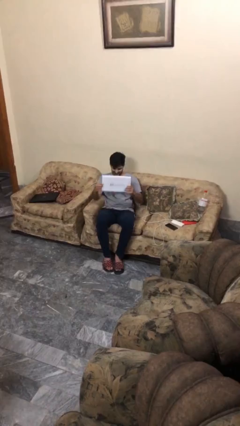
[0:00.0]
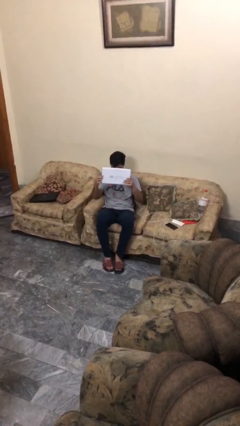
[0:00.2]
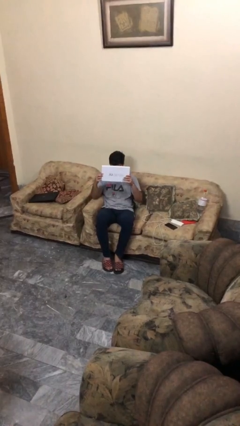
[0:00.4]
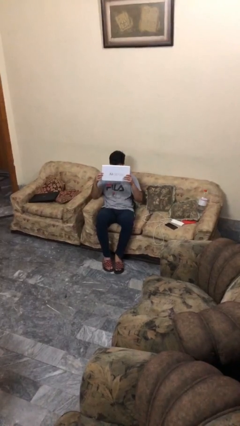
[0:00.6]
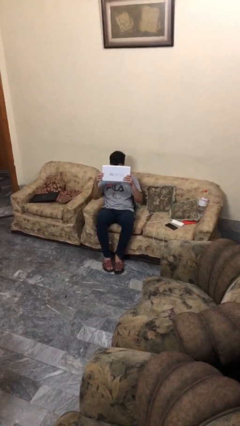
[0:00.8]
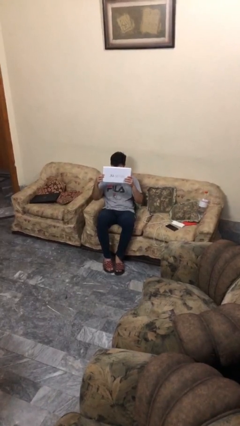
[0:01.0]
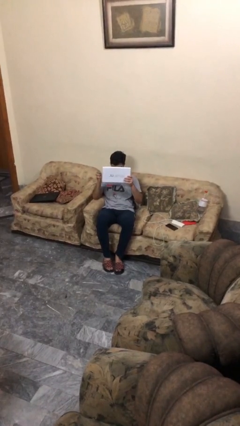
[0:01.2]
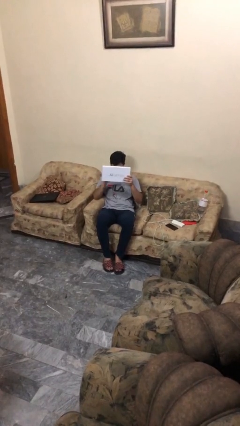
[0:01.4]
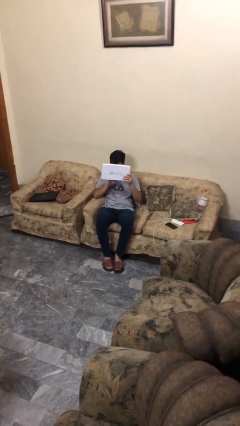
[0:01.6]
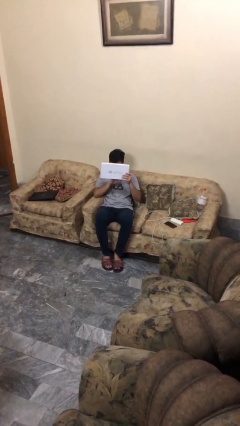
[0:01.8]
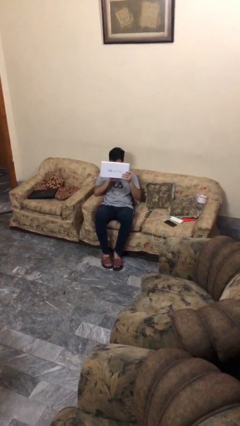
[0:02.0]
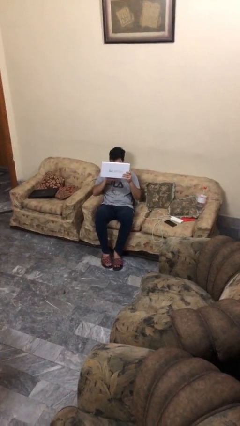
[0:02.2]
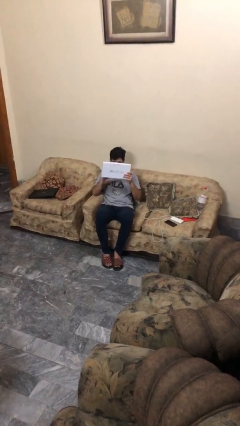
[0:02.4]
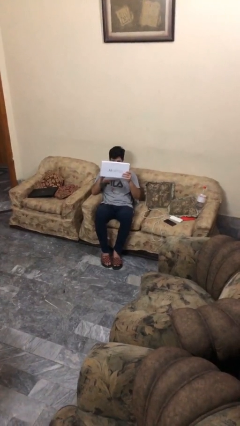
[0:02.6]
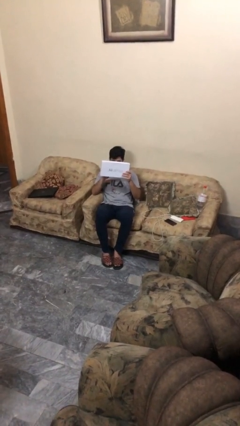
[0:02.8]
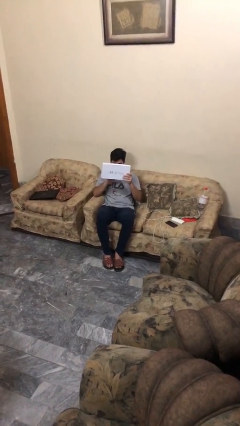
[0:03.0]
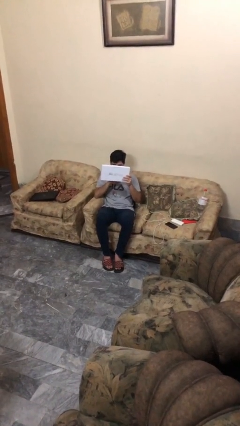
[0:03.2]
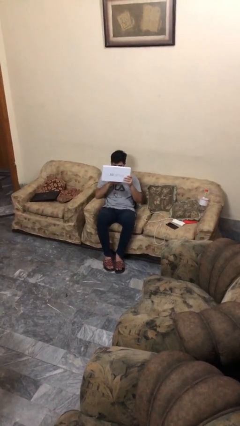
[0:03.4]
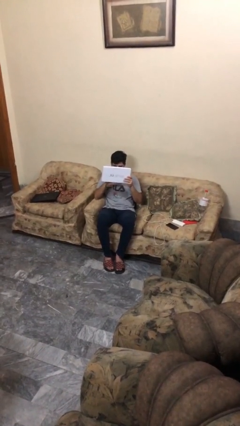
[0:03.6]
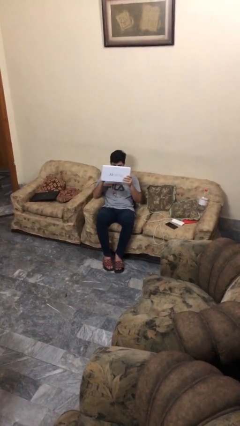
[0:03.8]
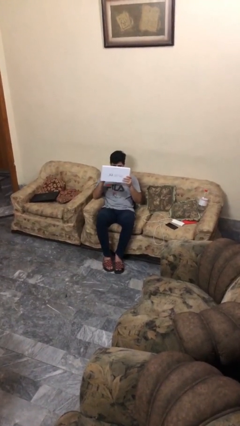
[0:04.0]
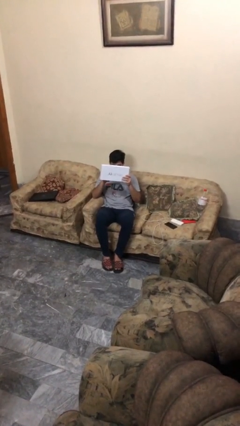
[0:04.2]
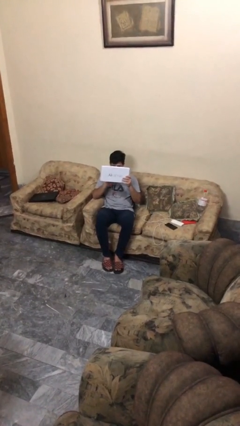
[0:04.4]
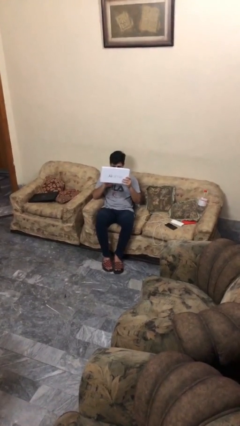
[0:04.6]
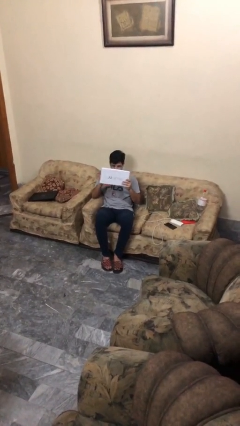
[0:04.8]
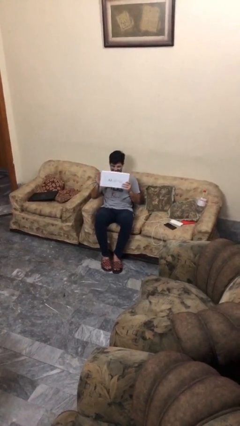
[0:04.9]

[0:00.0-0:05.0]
person interacts with tablet

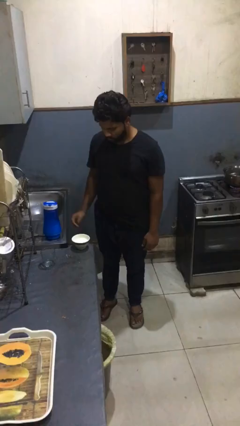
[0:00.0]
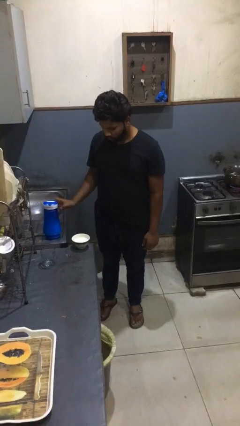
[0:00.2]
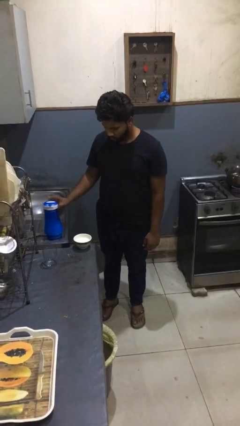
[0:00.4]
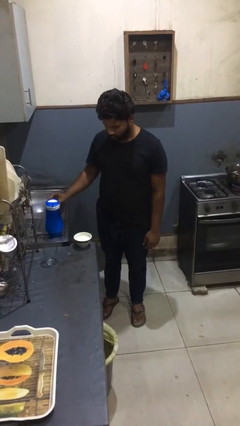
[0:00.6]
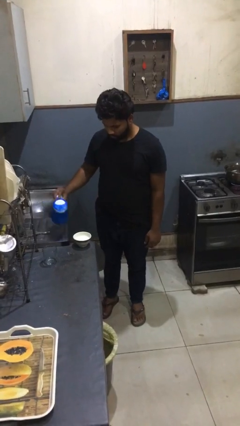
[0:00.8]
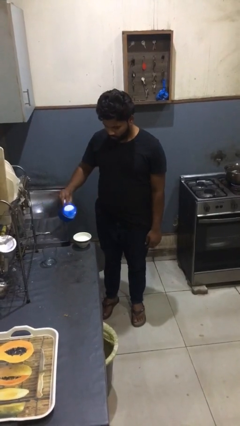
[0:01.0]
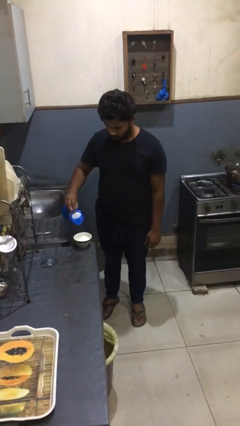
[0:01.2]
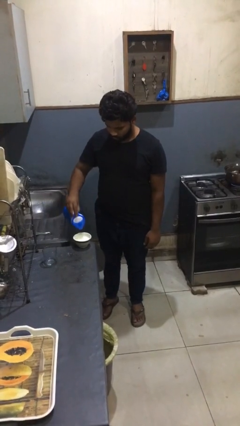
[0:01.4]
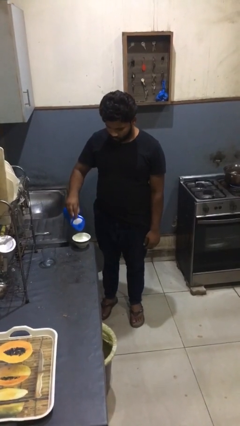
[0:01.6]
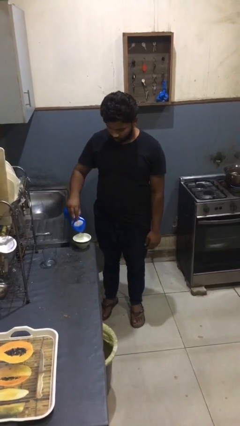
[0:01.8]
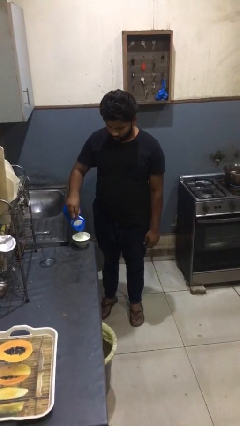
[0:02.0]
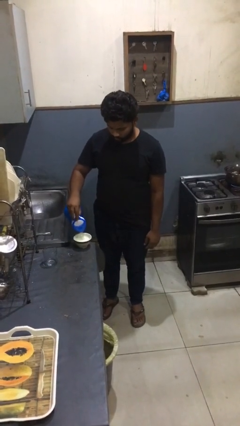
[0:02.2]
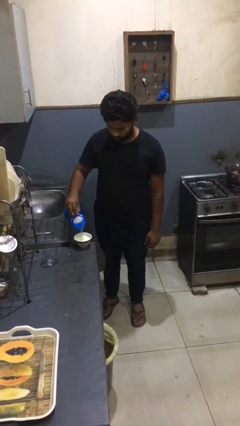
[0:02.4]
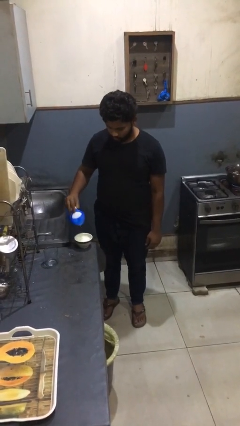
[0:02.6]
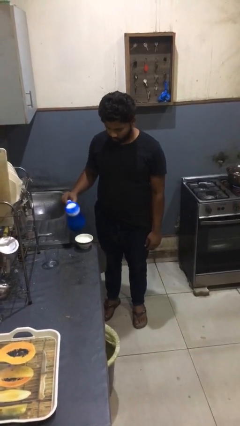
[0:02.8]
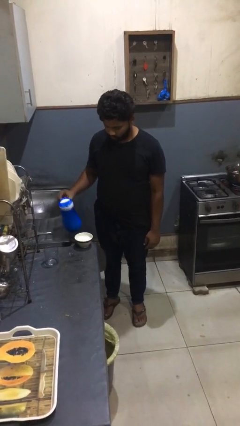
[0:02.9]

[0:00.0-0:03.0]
person pours into bowl

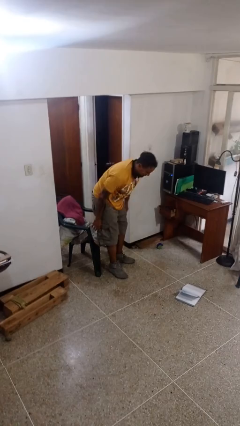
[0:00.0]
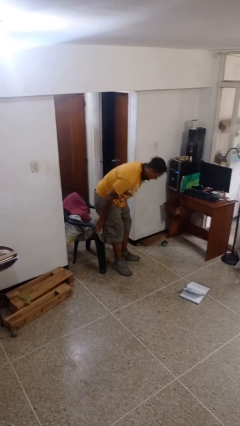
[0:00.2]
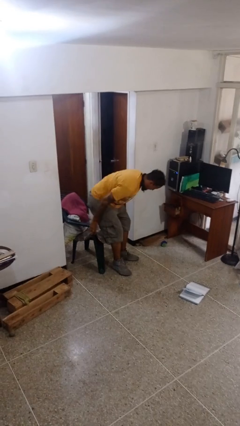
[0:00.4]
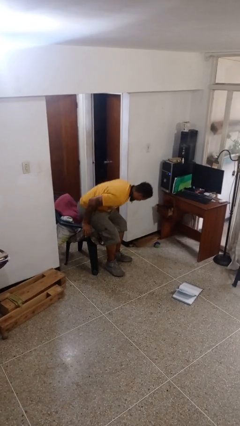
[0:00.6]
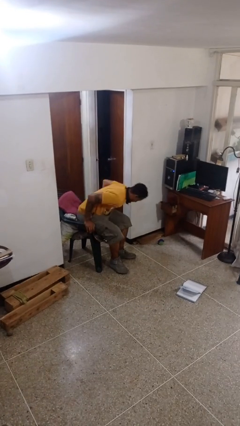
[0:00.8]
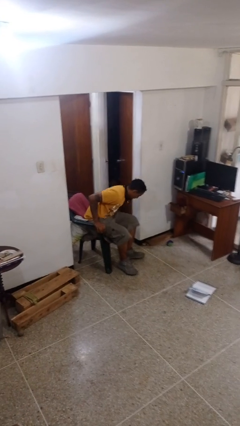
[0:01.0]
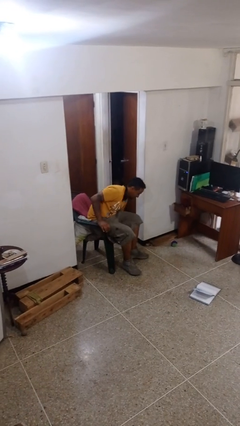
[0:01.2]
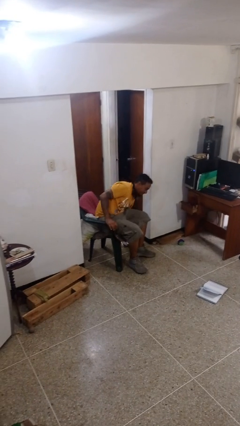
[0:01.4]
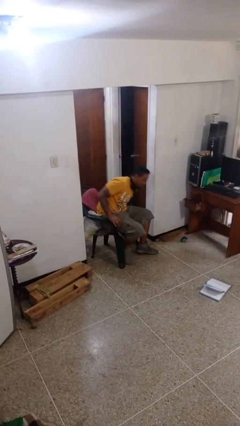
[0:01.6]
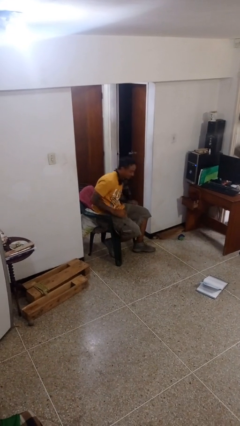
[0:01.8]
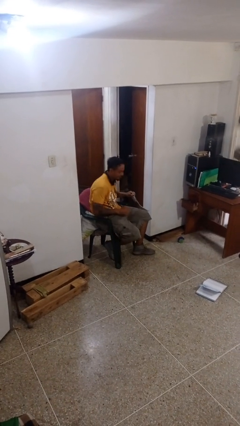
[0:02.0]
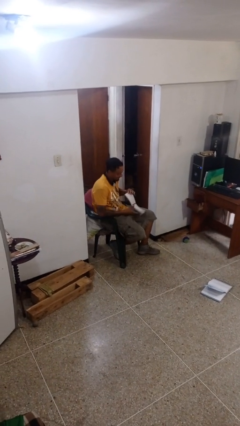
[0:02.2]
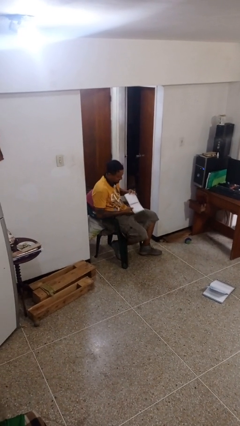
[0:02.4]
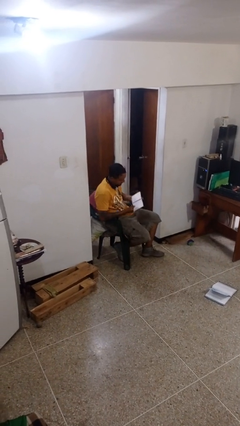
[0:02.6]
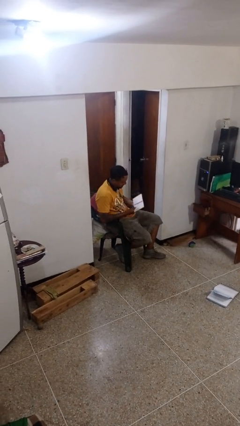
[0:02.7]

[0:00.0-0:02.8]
person sits down

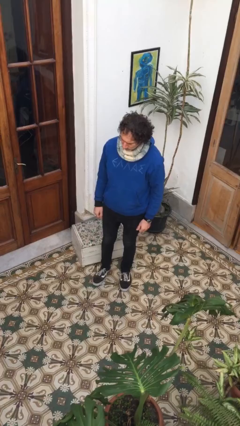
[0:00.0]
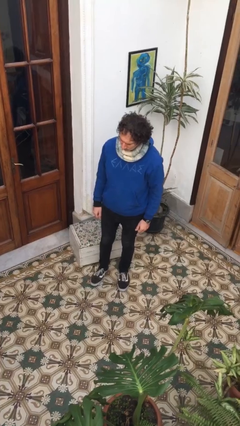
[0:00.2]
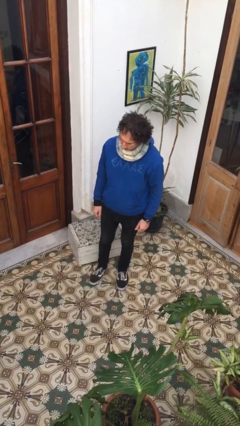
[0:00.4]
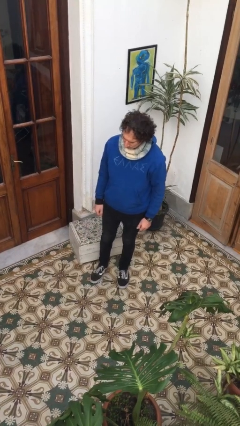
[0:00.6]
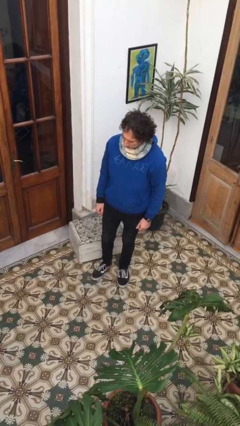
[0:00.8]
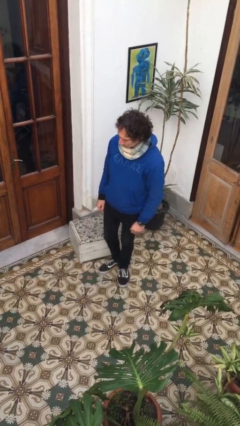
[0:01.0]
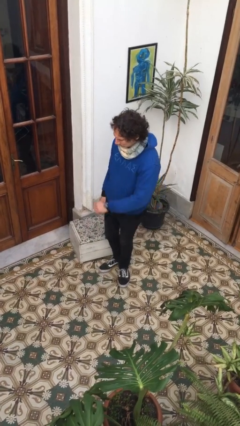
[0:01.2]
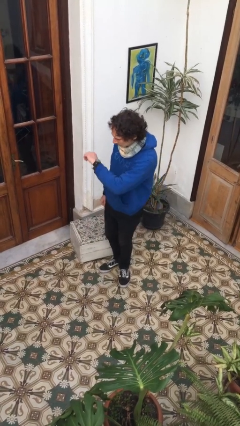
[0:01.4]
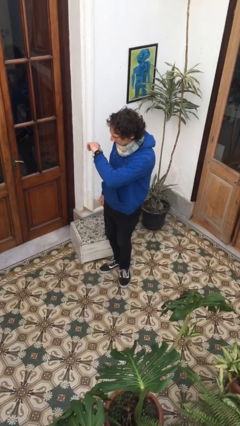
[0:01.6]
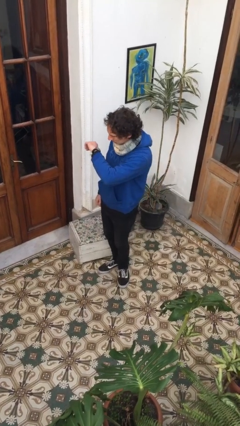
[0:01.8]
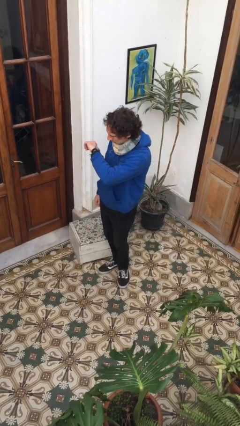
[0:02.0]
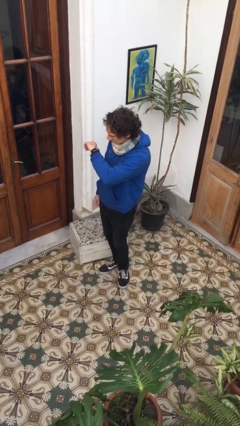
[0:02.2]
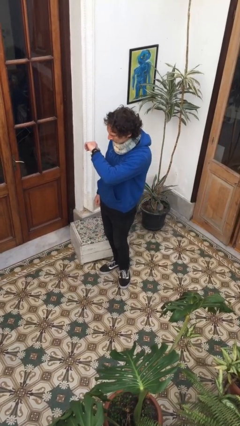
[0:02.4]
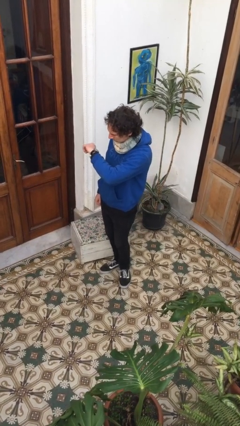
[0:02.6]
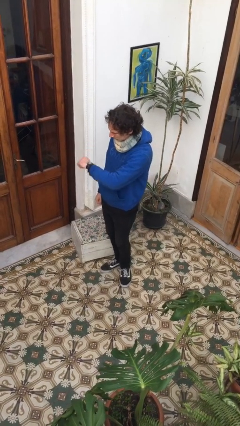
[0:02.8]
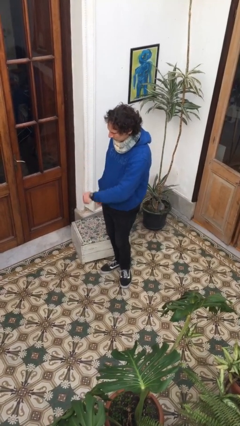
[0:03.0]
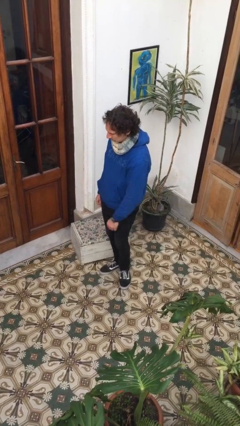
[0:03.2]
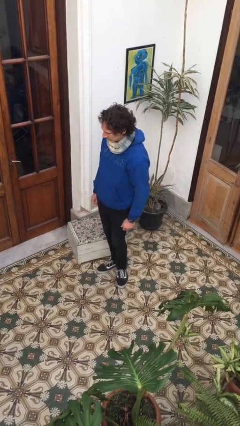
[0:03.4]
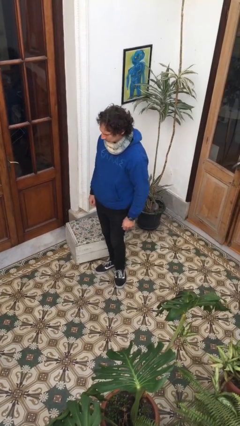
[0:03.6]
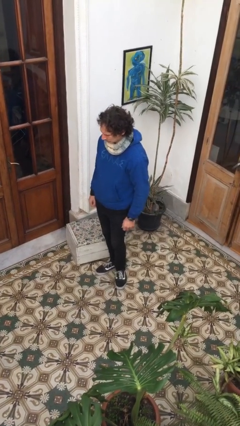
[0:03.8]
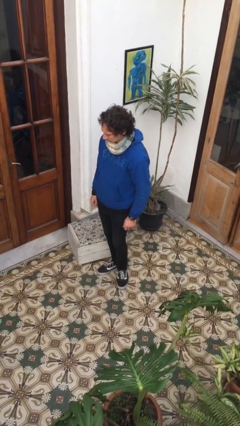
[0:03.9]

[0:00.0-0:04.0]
person looks at wristwatch

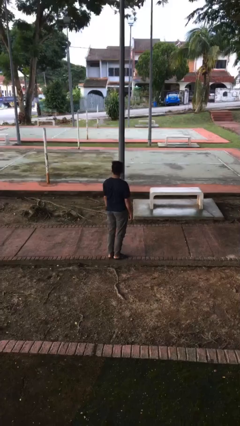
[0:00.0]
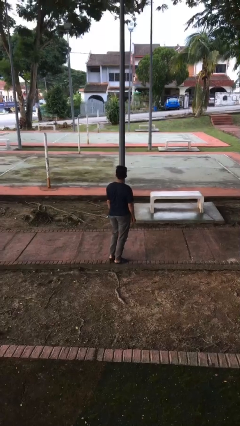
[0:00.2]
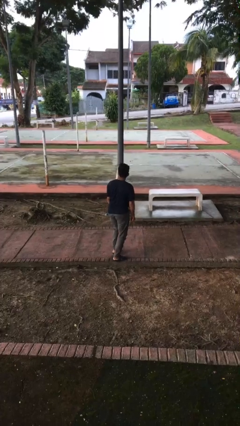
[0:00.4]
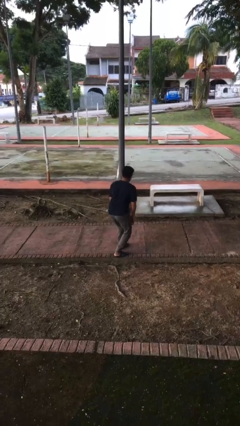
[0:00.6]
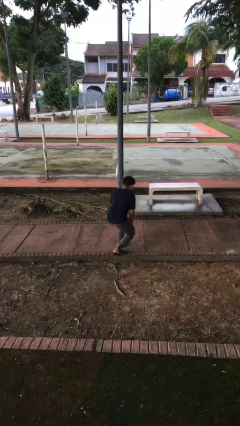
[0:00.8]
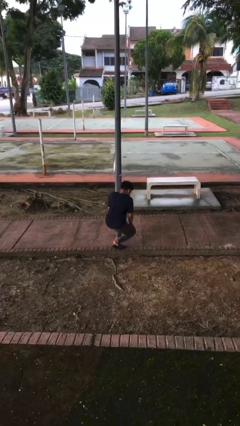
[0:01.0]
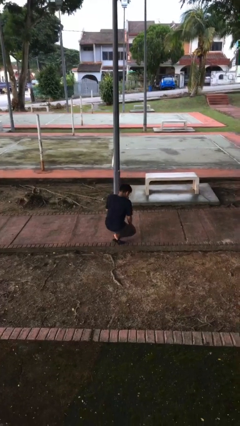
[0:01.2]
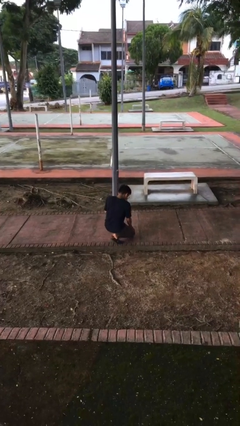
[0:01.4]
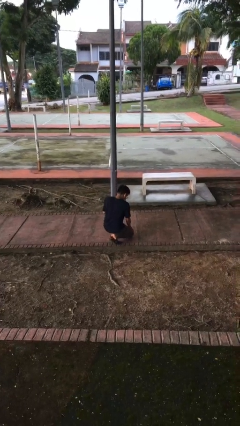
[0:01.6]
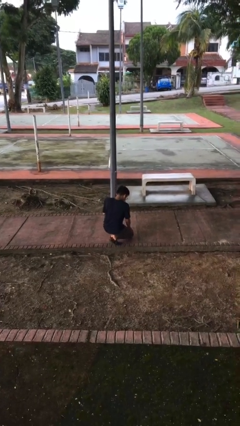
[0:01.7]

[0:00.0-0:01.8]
person kneels

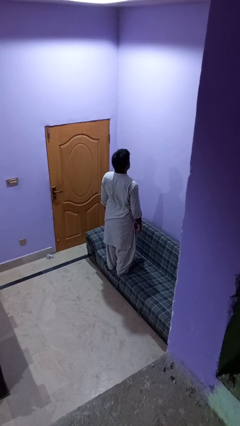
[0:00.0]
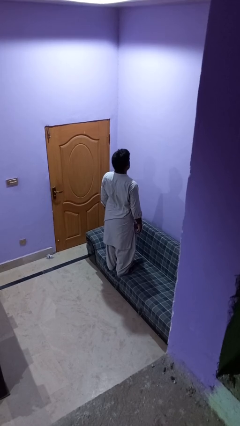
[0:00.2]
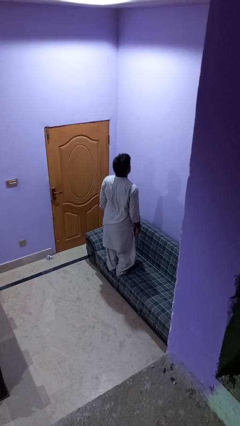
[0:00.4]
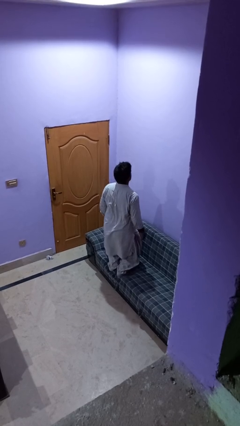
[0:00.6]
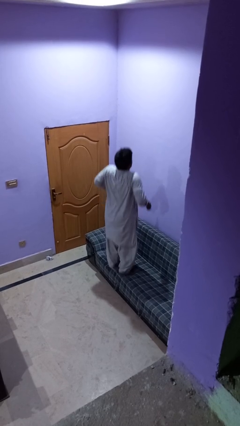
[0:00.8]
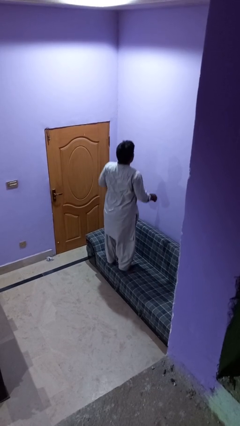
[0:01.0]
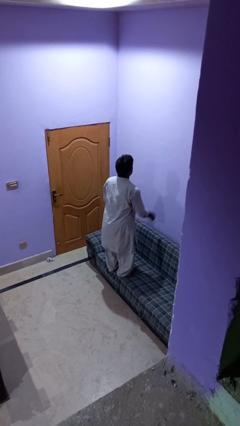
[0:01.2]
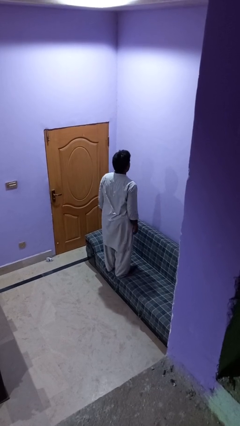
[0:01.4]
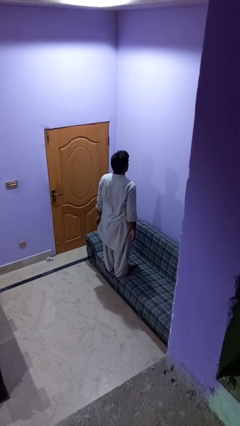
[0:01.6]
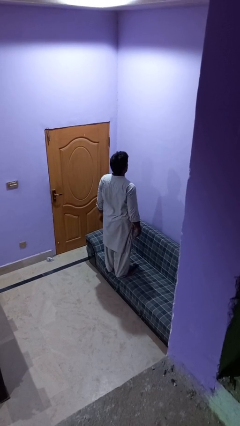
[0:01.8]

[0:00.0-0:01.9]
person jumps on couch
